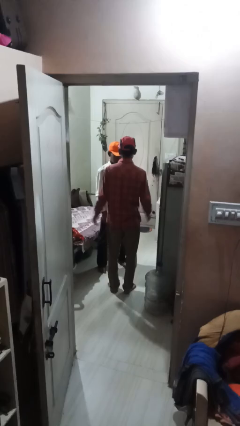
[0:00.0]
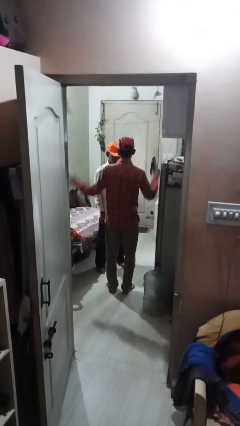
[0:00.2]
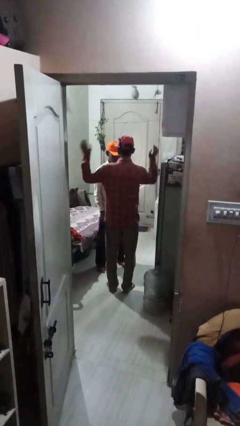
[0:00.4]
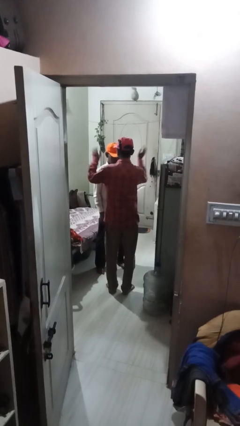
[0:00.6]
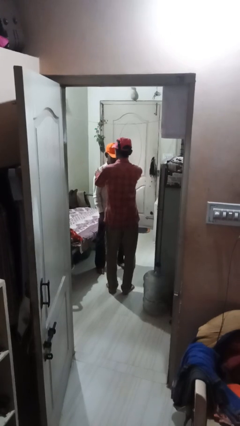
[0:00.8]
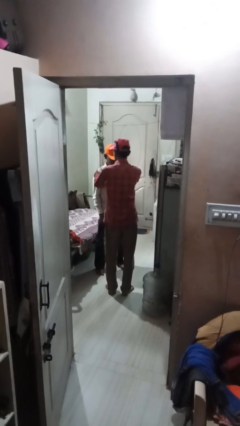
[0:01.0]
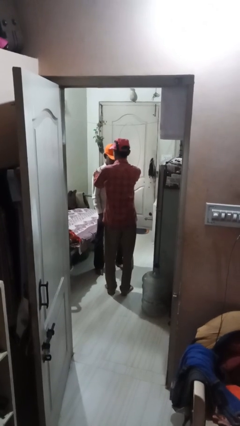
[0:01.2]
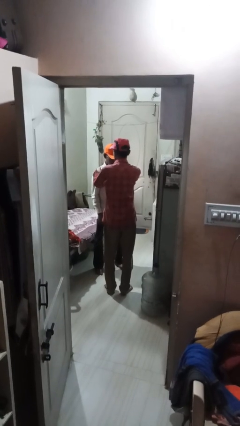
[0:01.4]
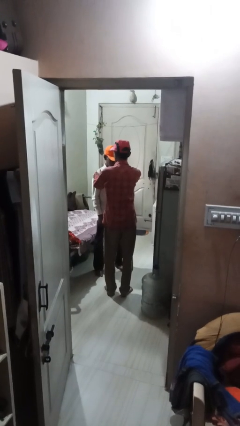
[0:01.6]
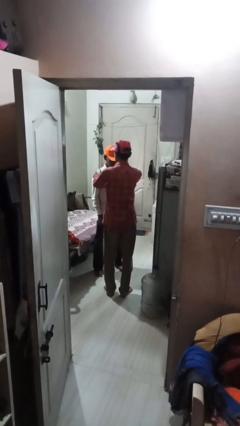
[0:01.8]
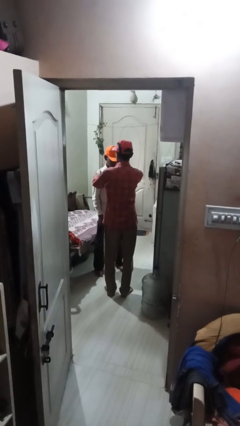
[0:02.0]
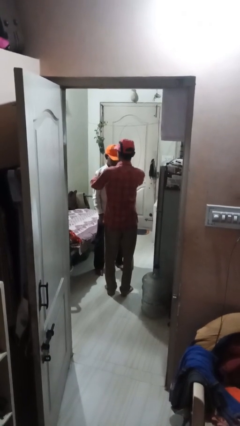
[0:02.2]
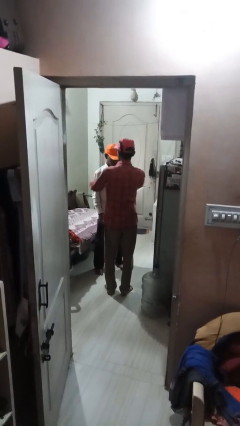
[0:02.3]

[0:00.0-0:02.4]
person pounds shoulders of person

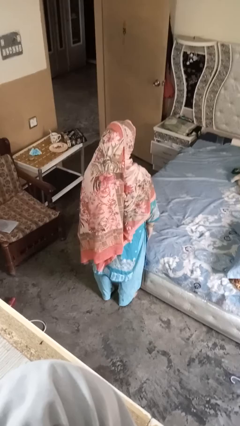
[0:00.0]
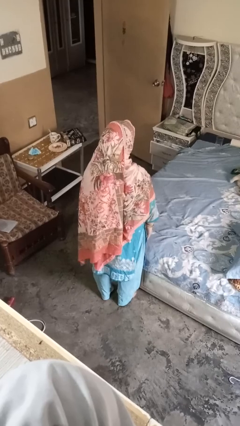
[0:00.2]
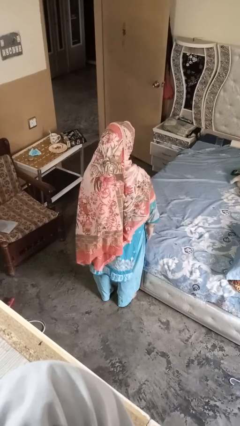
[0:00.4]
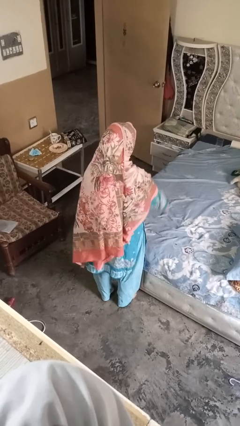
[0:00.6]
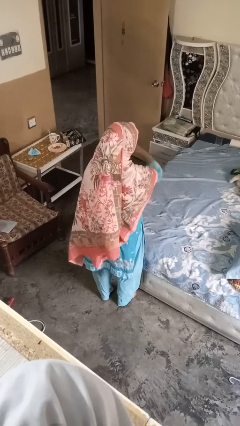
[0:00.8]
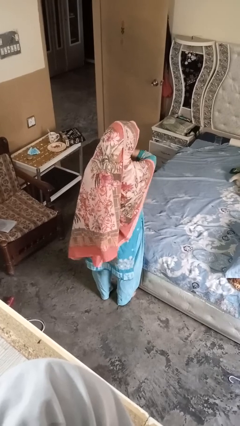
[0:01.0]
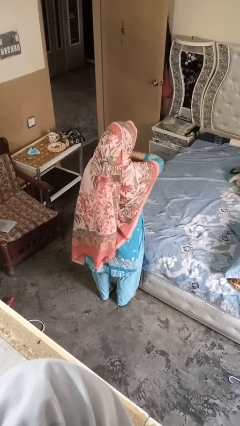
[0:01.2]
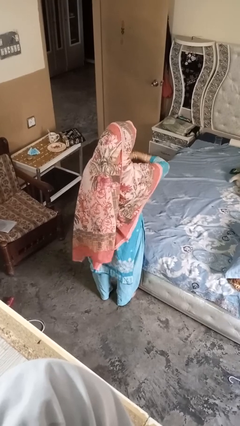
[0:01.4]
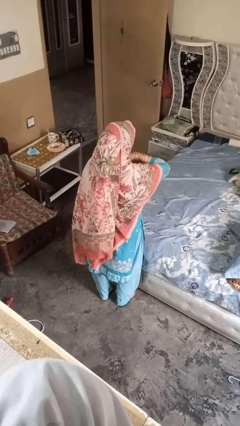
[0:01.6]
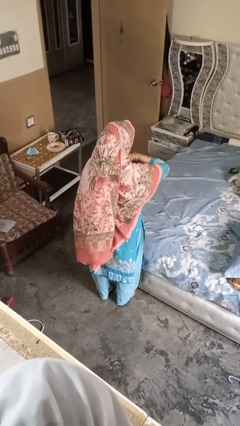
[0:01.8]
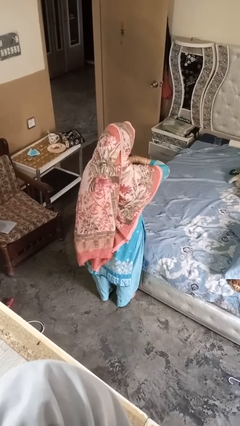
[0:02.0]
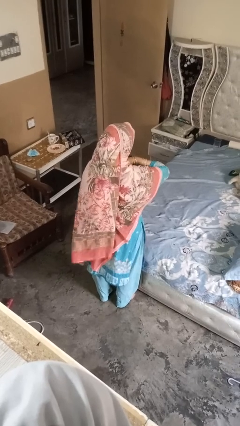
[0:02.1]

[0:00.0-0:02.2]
person gestures cut

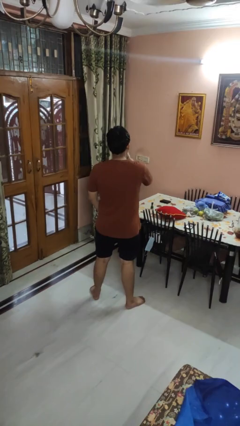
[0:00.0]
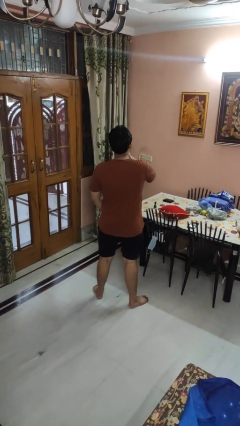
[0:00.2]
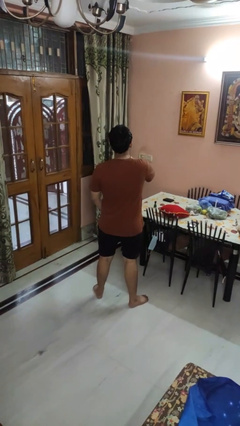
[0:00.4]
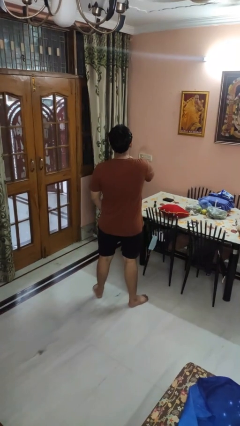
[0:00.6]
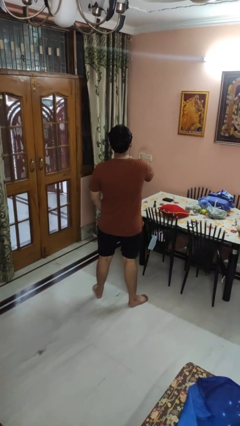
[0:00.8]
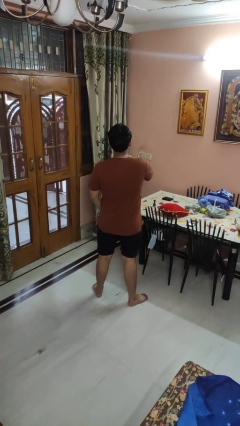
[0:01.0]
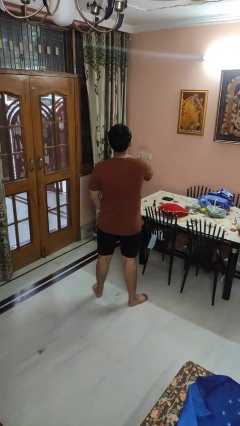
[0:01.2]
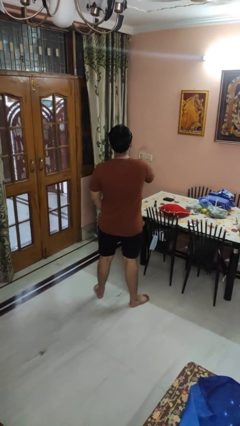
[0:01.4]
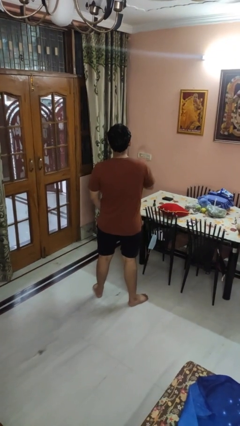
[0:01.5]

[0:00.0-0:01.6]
person gestures be quiet

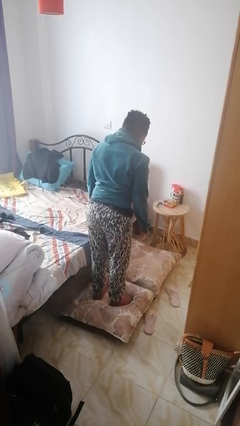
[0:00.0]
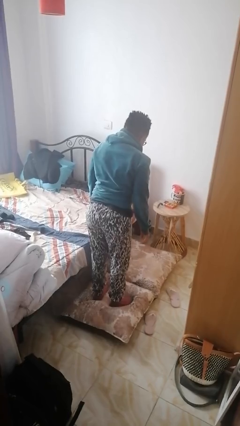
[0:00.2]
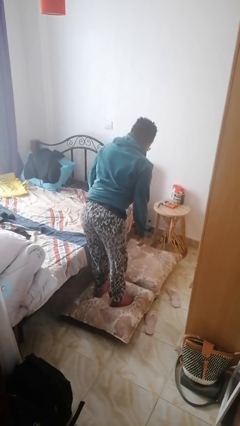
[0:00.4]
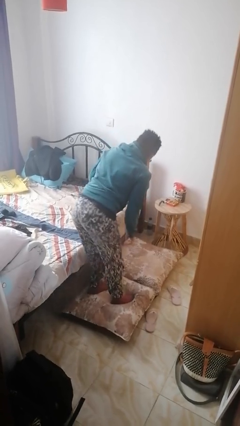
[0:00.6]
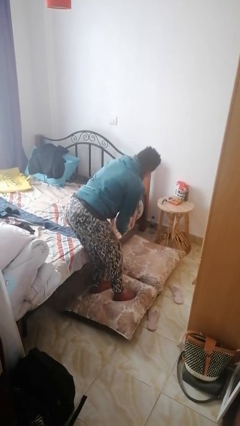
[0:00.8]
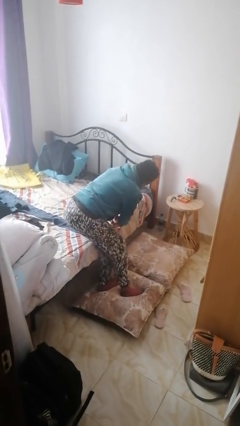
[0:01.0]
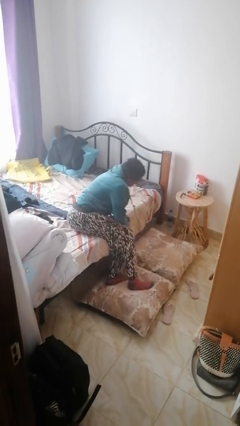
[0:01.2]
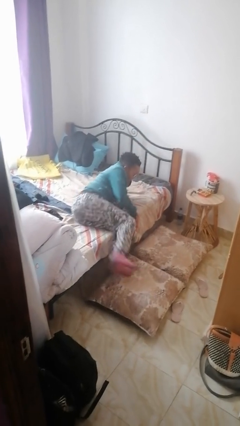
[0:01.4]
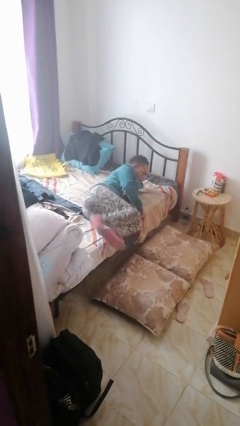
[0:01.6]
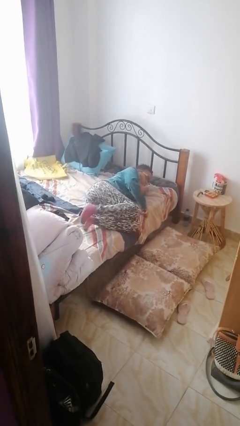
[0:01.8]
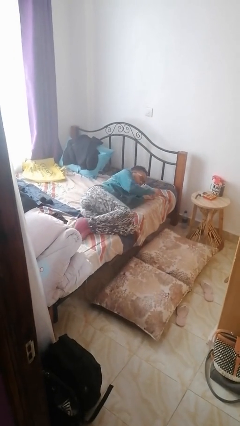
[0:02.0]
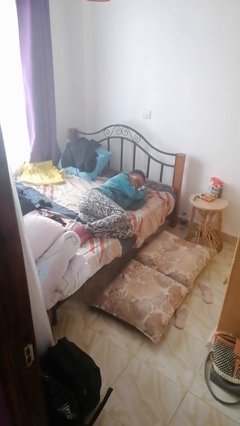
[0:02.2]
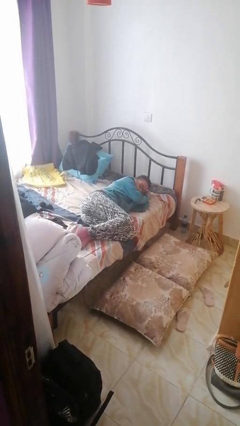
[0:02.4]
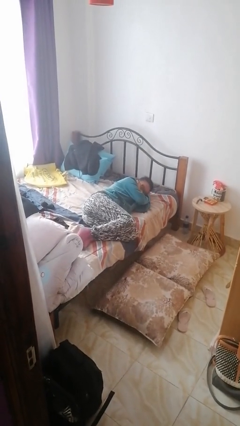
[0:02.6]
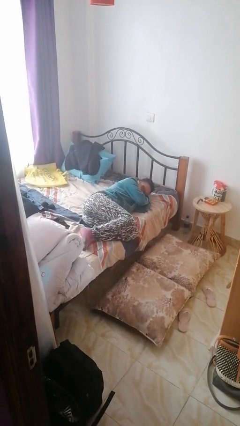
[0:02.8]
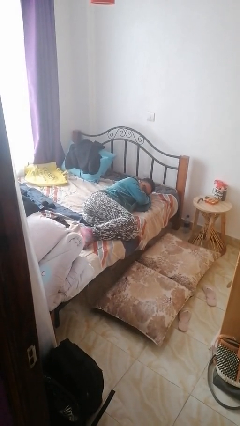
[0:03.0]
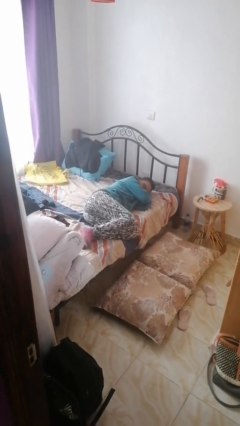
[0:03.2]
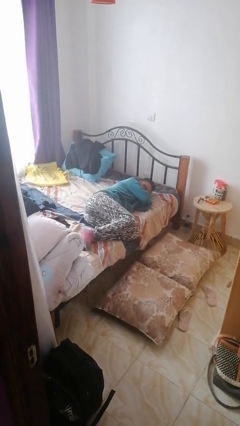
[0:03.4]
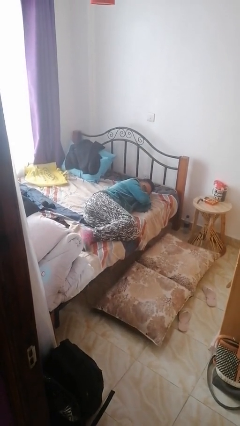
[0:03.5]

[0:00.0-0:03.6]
person lies down on bed

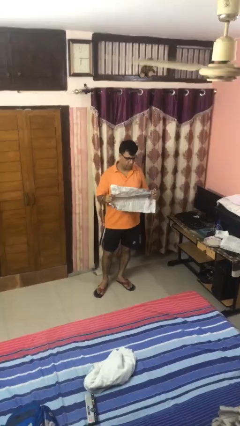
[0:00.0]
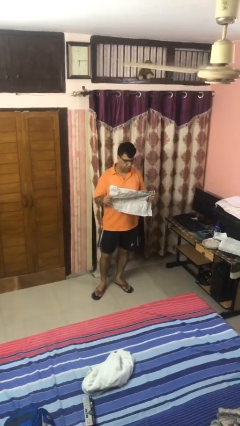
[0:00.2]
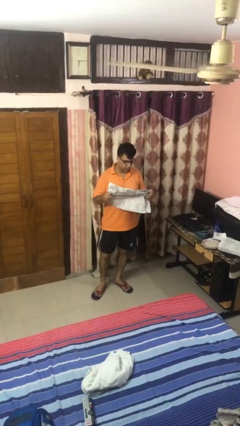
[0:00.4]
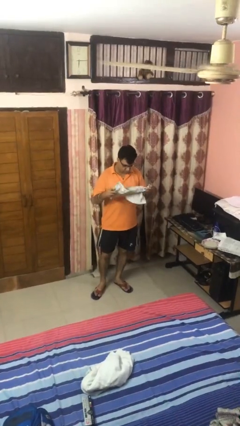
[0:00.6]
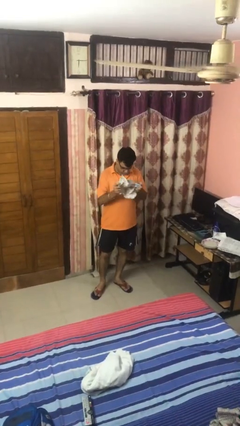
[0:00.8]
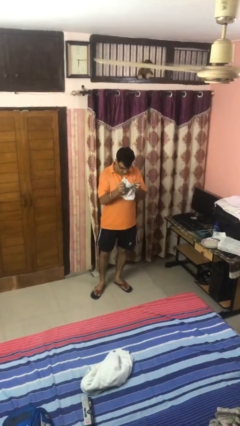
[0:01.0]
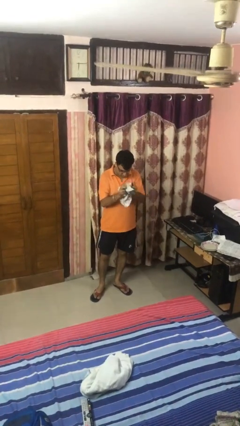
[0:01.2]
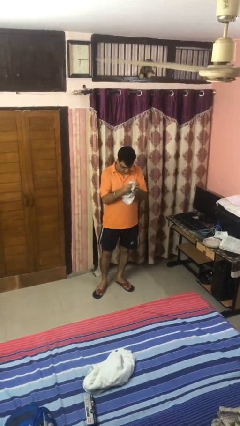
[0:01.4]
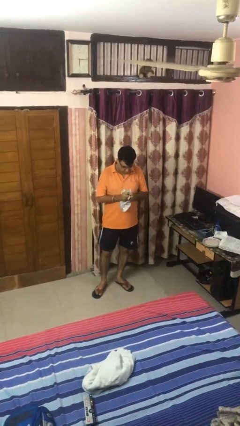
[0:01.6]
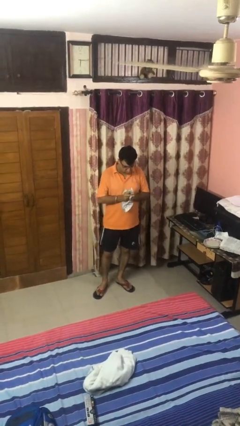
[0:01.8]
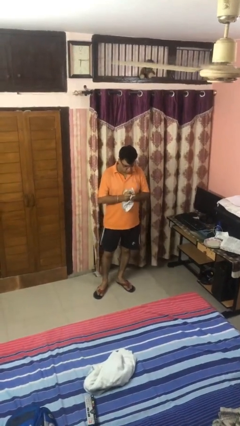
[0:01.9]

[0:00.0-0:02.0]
person crumples paper

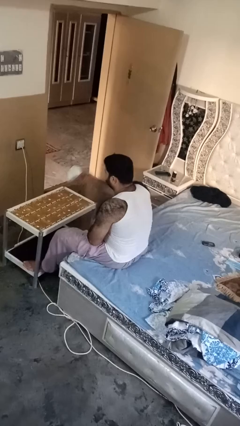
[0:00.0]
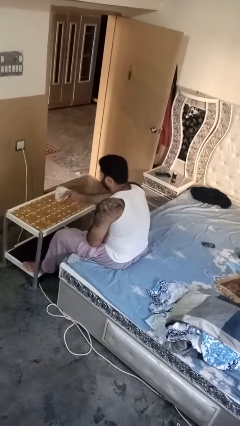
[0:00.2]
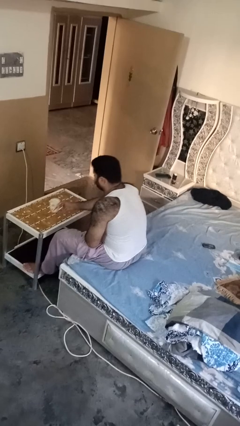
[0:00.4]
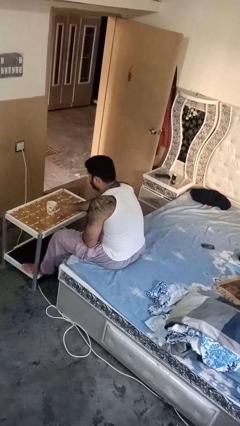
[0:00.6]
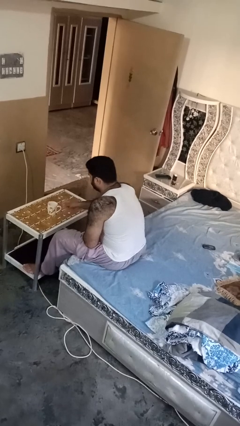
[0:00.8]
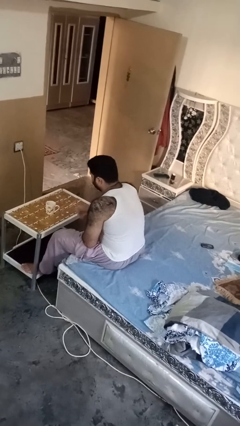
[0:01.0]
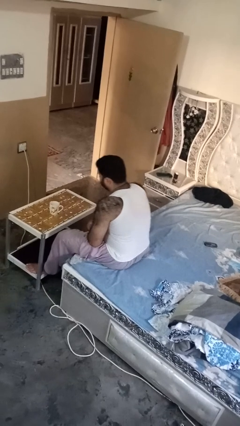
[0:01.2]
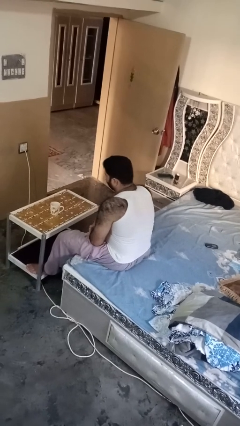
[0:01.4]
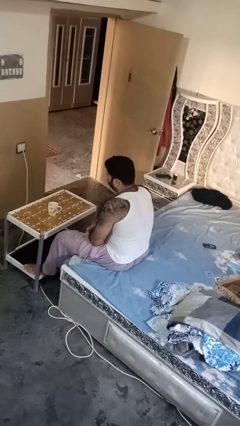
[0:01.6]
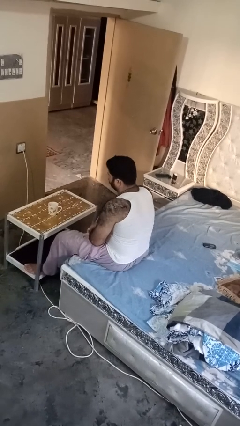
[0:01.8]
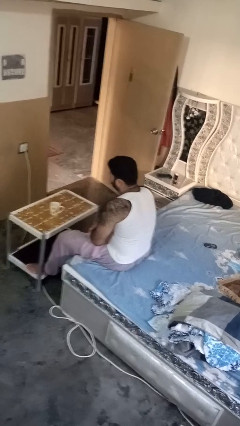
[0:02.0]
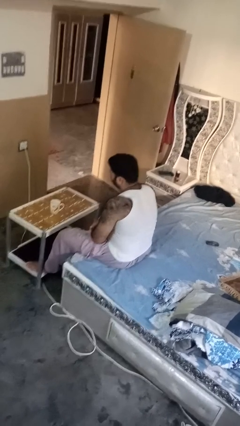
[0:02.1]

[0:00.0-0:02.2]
person puts down object on table

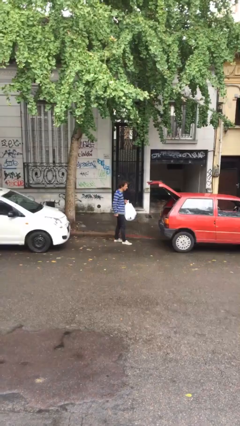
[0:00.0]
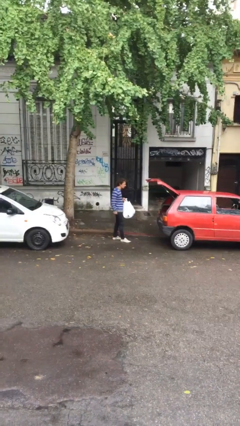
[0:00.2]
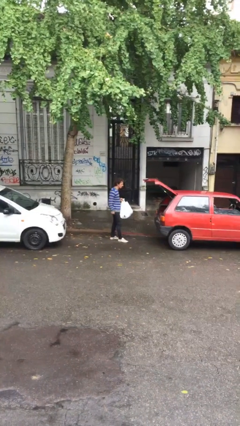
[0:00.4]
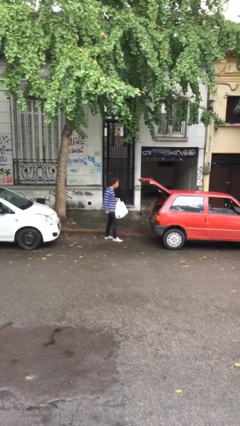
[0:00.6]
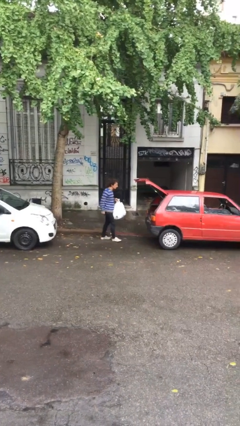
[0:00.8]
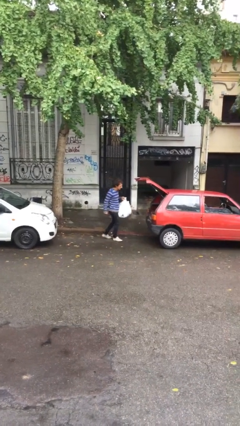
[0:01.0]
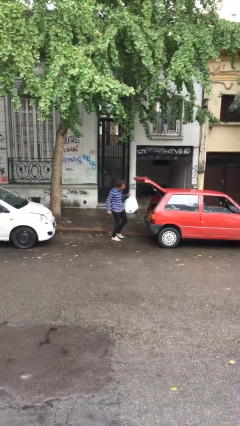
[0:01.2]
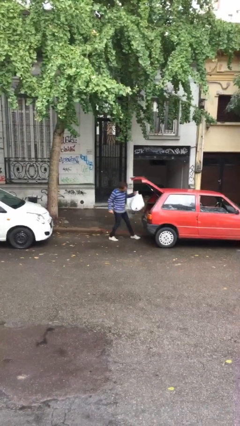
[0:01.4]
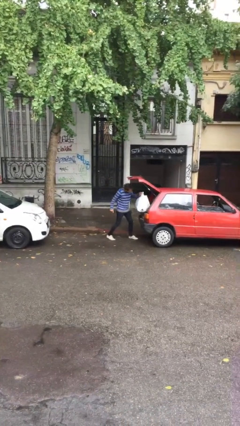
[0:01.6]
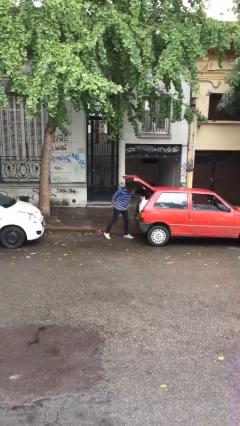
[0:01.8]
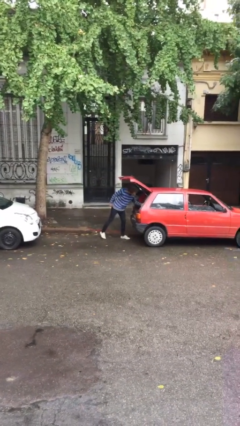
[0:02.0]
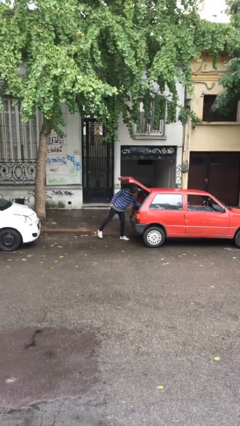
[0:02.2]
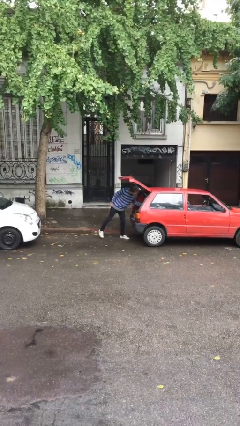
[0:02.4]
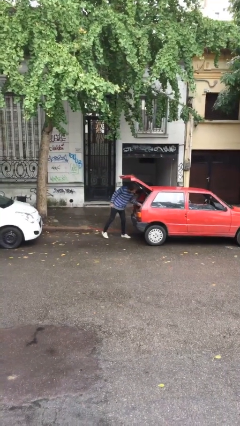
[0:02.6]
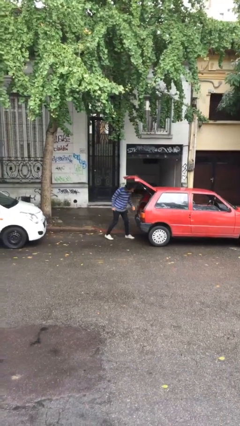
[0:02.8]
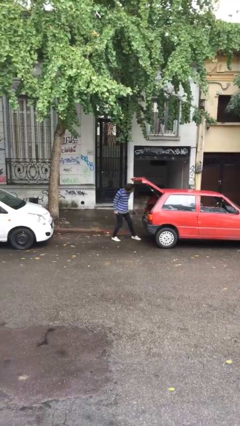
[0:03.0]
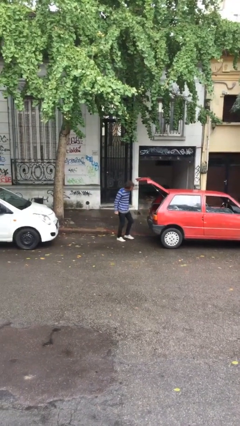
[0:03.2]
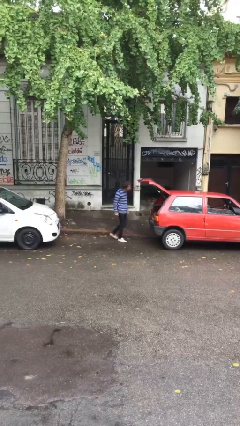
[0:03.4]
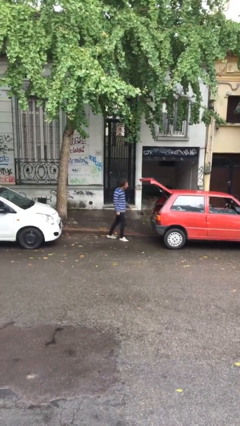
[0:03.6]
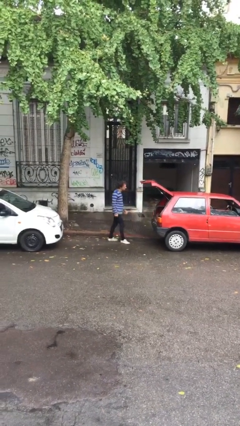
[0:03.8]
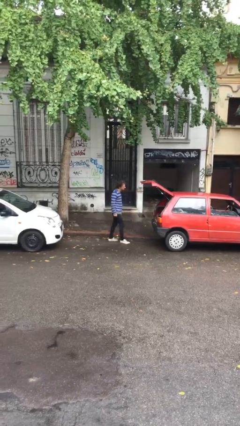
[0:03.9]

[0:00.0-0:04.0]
person loads car
